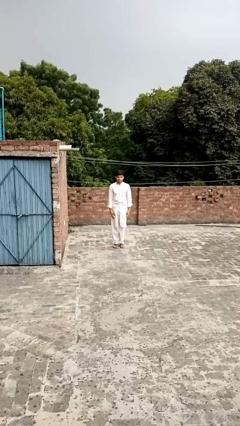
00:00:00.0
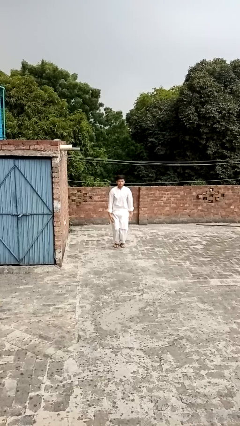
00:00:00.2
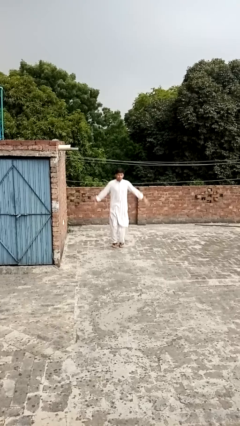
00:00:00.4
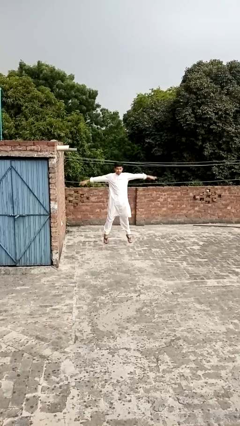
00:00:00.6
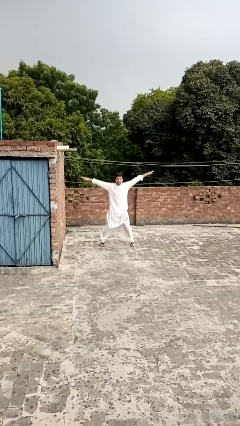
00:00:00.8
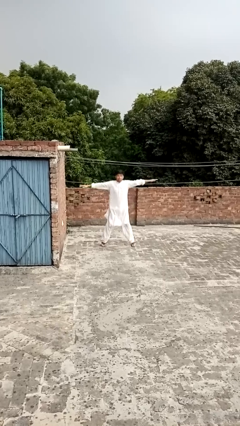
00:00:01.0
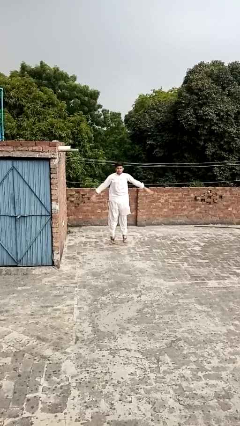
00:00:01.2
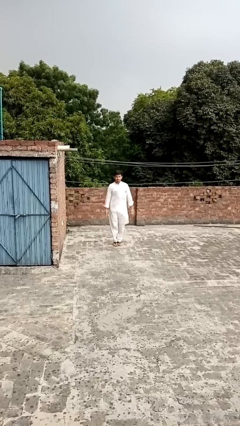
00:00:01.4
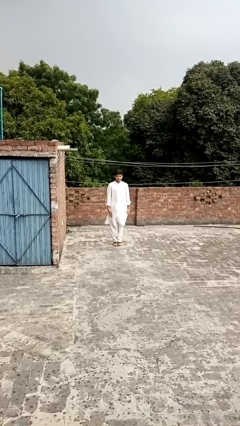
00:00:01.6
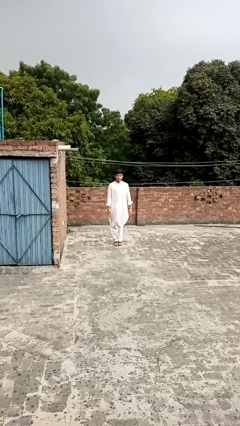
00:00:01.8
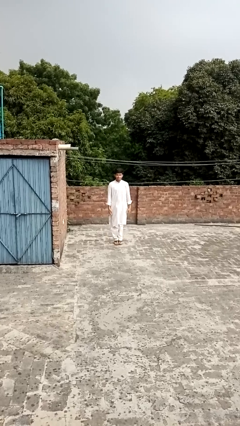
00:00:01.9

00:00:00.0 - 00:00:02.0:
person exercises with jumping jacks

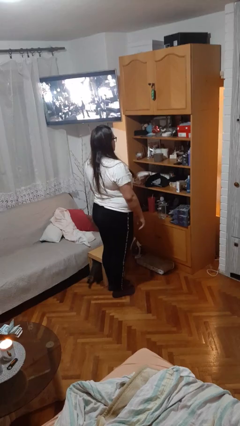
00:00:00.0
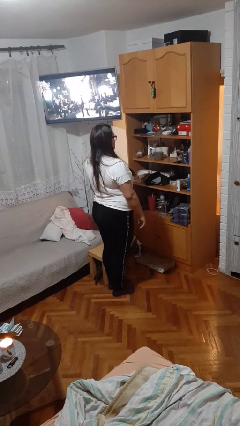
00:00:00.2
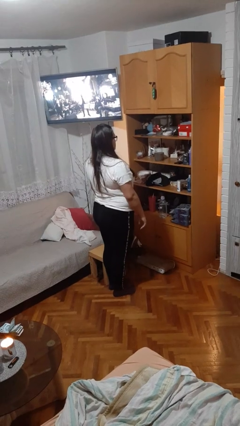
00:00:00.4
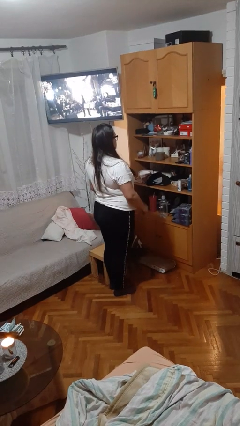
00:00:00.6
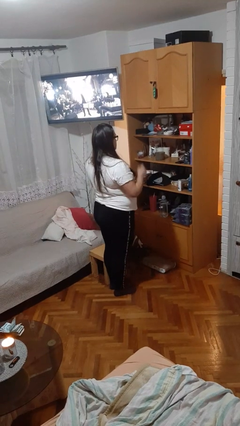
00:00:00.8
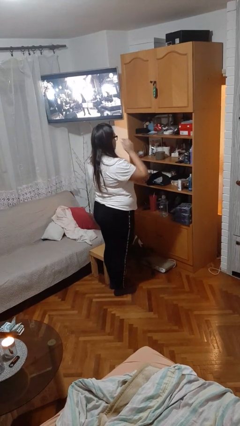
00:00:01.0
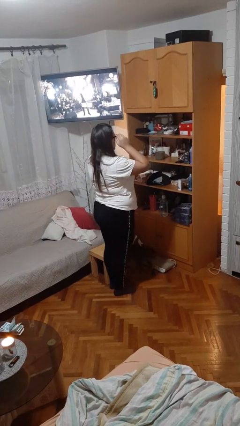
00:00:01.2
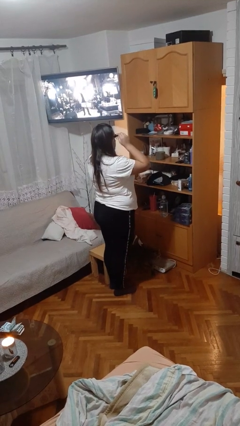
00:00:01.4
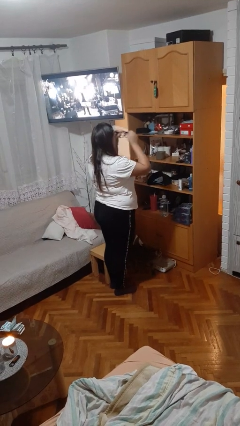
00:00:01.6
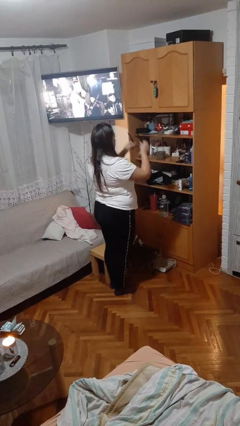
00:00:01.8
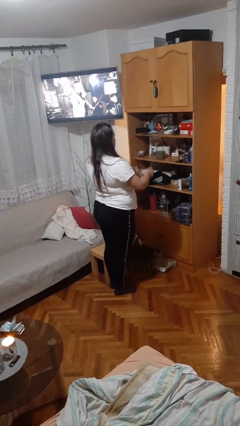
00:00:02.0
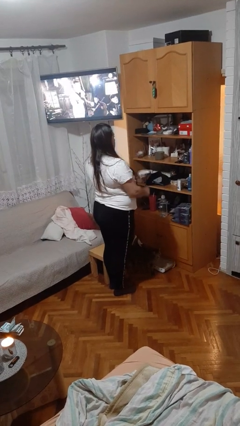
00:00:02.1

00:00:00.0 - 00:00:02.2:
person takes off glasses

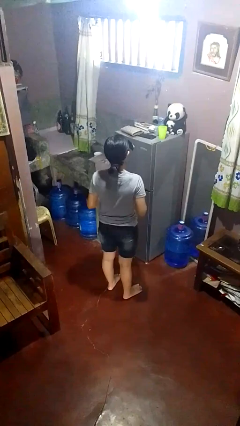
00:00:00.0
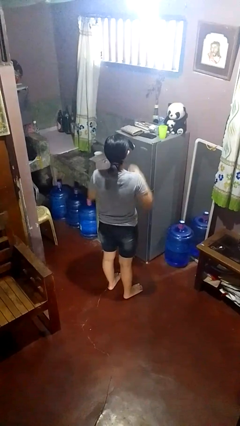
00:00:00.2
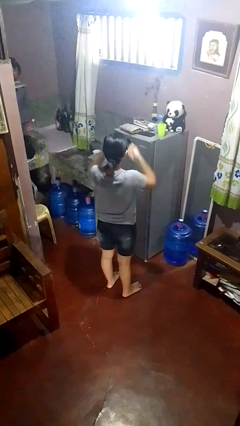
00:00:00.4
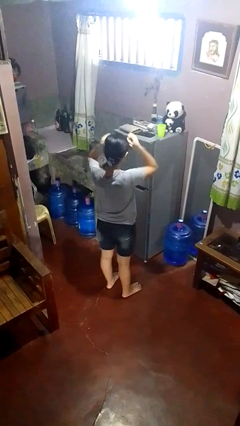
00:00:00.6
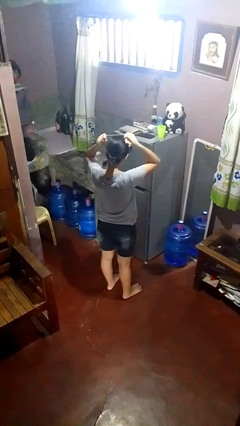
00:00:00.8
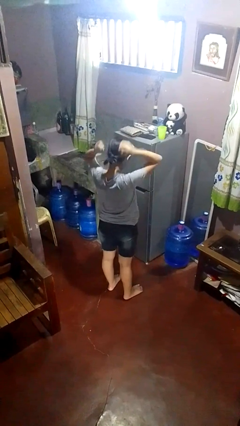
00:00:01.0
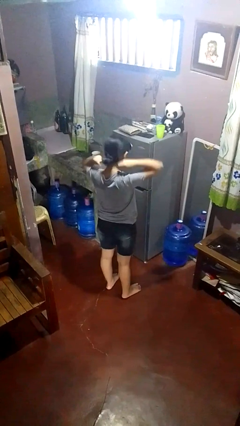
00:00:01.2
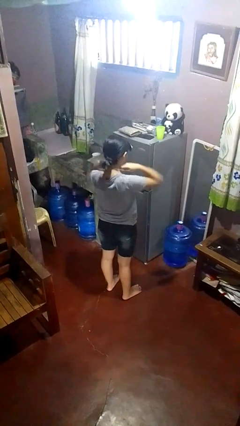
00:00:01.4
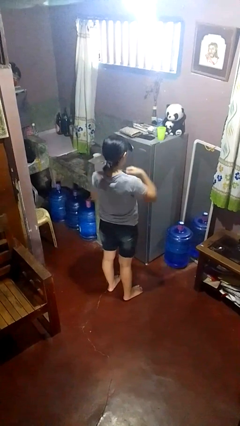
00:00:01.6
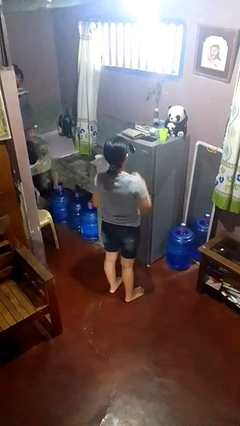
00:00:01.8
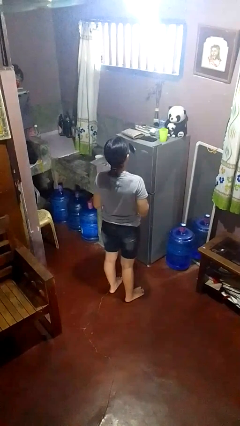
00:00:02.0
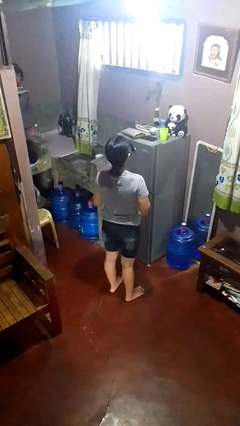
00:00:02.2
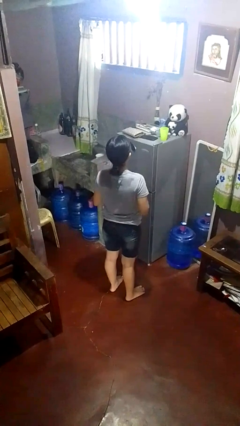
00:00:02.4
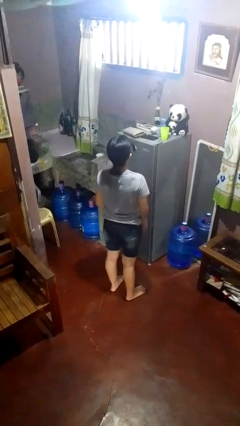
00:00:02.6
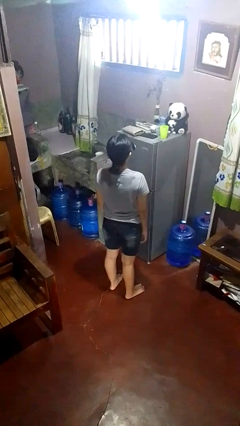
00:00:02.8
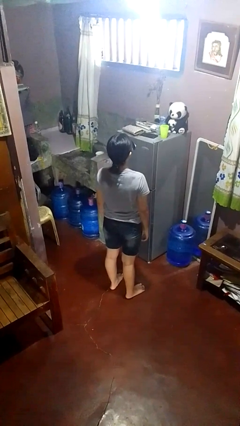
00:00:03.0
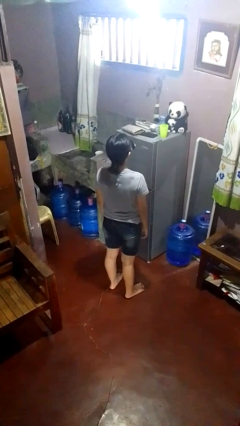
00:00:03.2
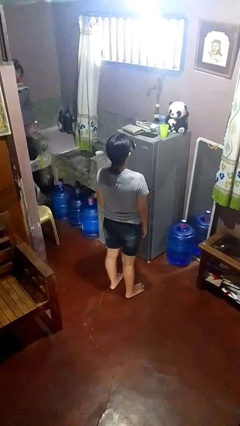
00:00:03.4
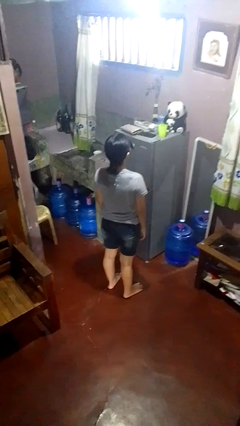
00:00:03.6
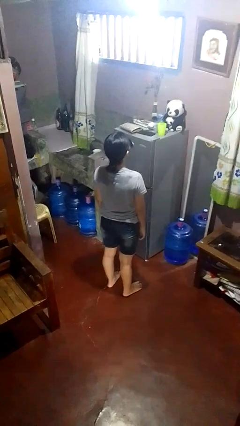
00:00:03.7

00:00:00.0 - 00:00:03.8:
person puts on necklace

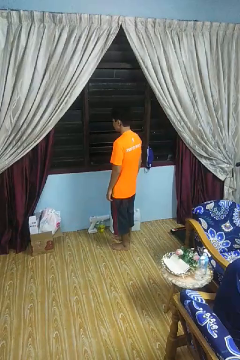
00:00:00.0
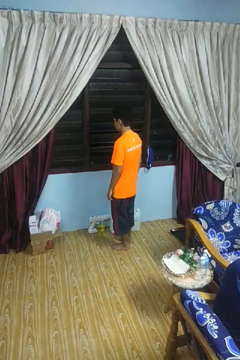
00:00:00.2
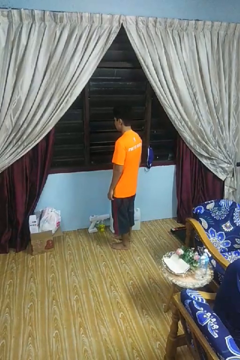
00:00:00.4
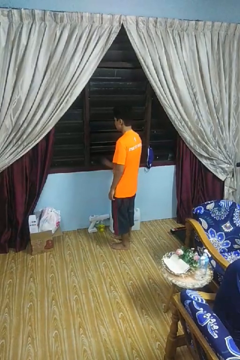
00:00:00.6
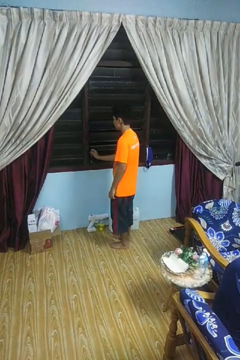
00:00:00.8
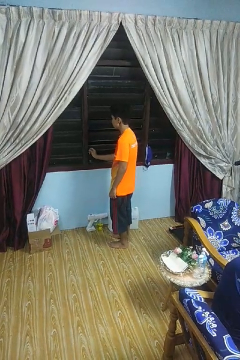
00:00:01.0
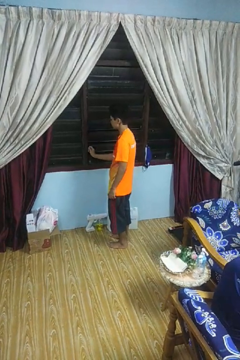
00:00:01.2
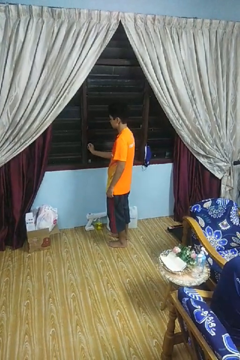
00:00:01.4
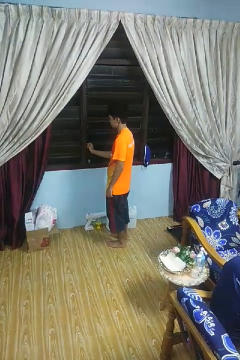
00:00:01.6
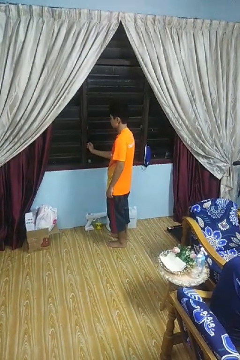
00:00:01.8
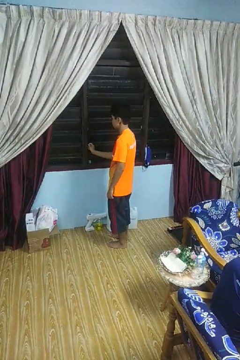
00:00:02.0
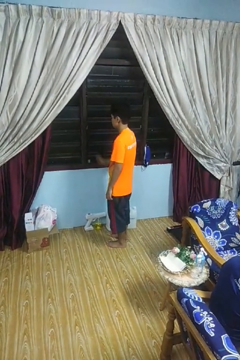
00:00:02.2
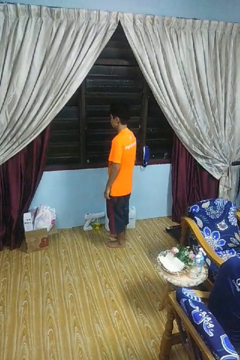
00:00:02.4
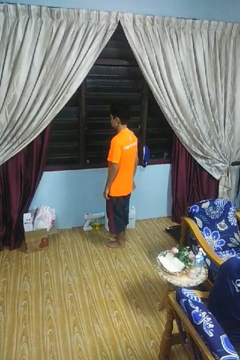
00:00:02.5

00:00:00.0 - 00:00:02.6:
person closes home window

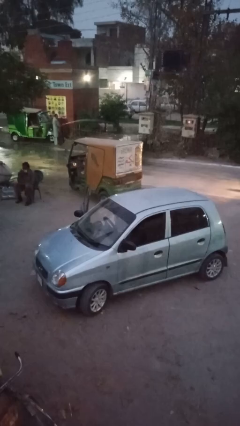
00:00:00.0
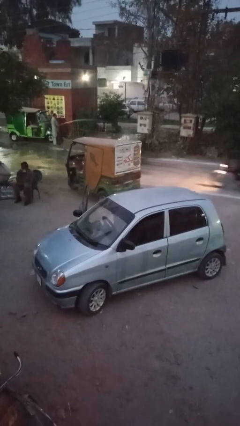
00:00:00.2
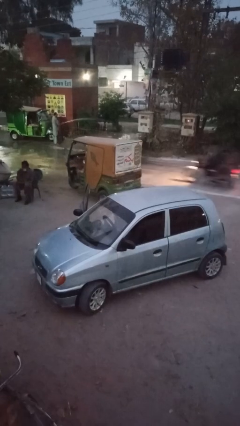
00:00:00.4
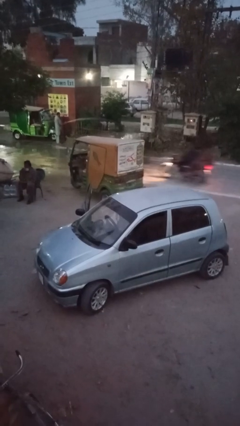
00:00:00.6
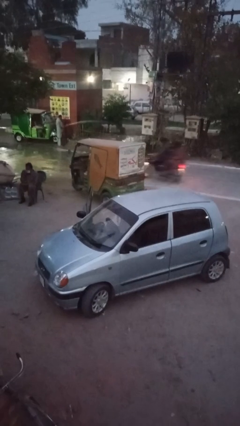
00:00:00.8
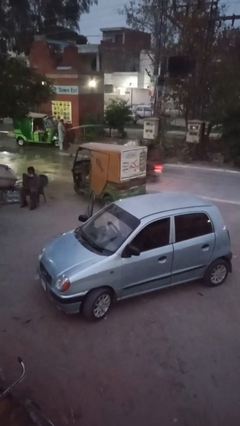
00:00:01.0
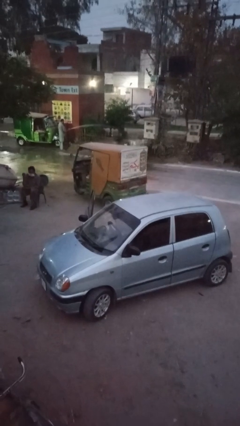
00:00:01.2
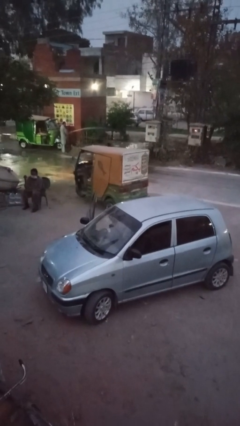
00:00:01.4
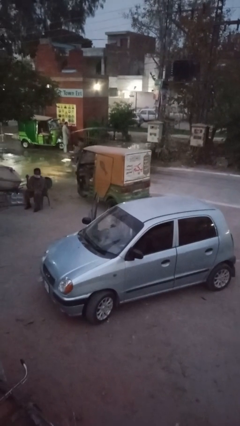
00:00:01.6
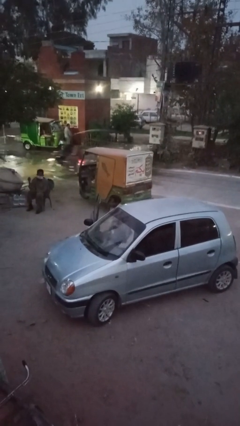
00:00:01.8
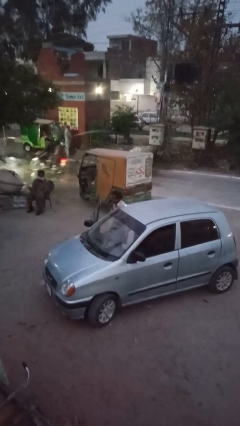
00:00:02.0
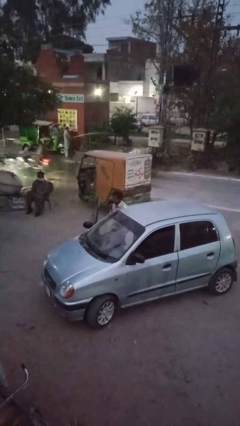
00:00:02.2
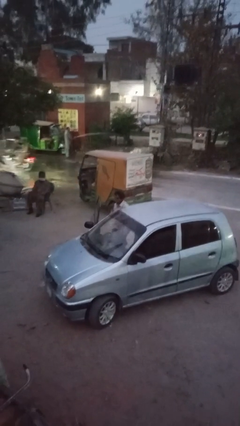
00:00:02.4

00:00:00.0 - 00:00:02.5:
person exits car

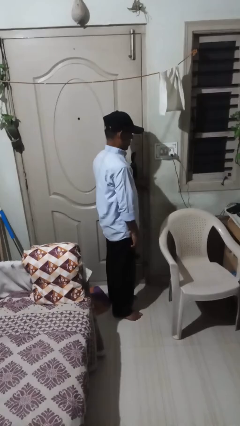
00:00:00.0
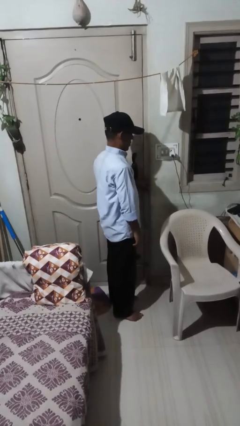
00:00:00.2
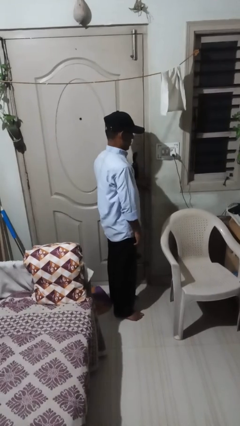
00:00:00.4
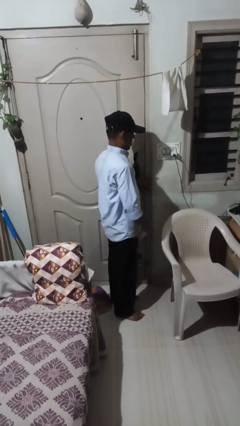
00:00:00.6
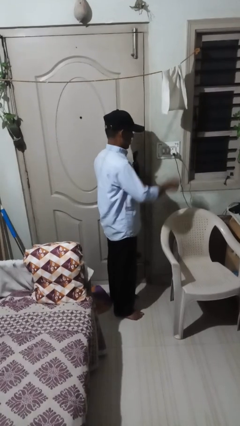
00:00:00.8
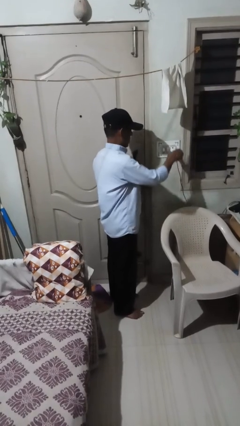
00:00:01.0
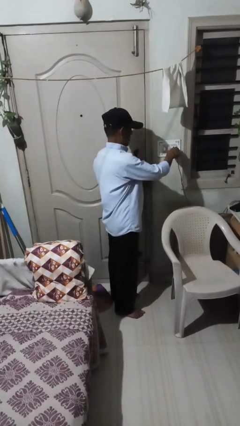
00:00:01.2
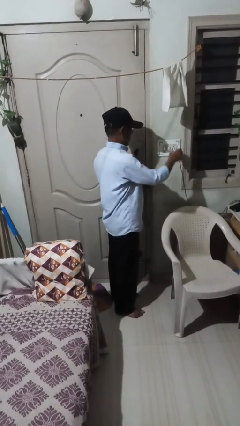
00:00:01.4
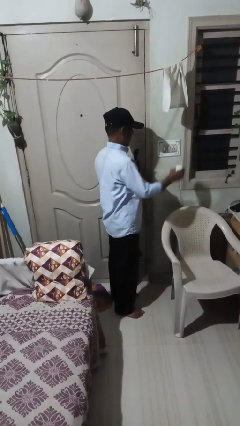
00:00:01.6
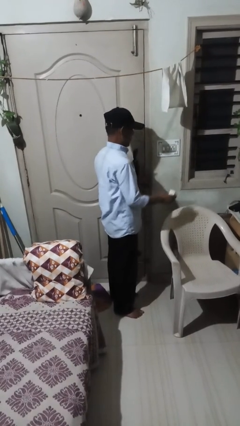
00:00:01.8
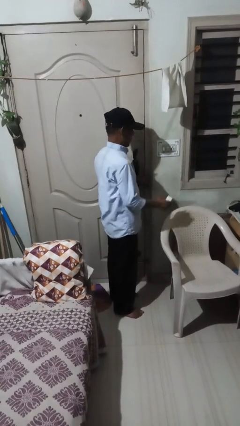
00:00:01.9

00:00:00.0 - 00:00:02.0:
person unplugs from electrical socket

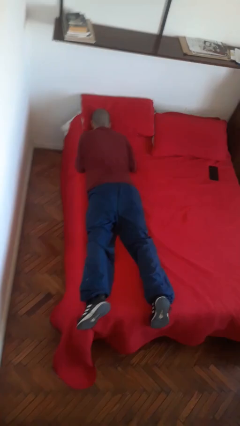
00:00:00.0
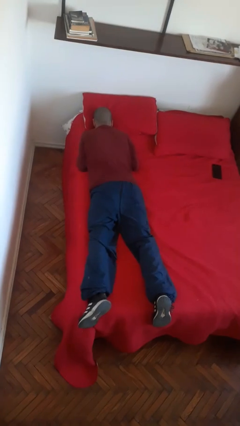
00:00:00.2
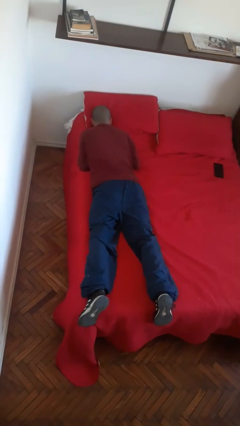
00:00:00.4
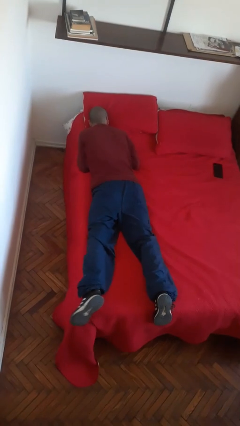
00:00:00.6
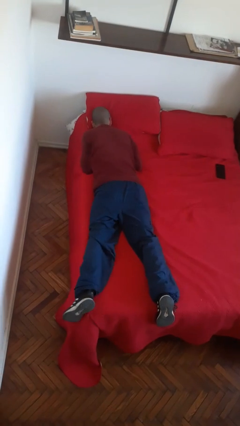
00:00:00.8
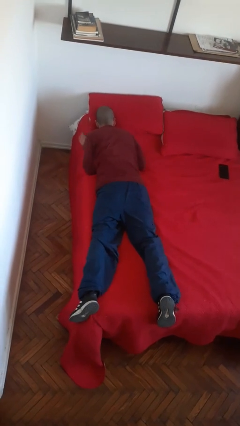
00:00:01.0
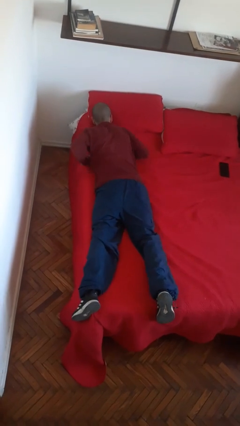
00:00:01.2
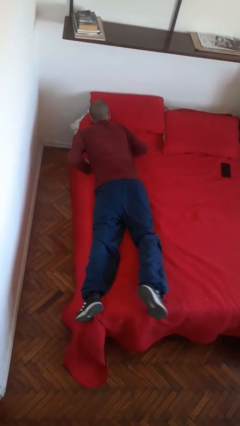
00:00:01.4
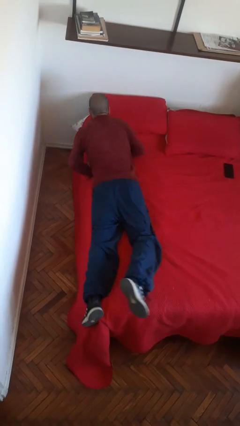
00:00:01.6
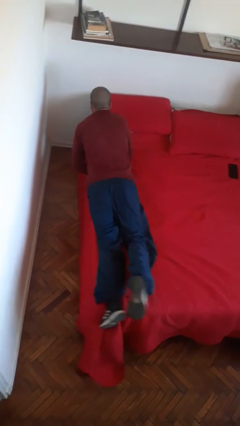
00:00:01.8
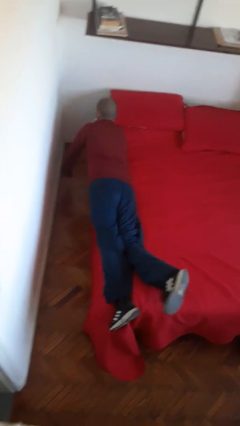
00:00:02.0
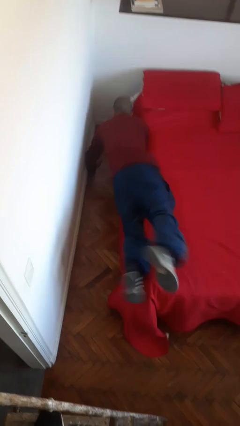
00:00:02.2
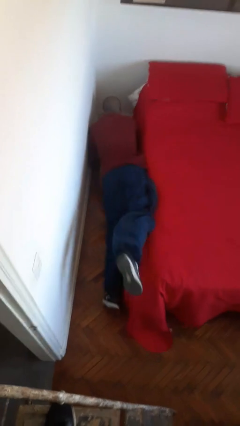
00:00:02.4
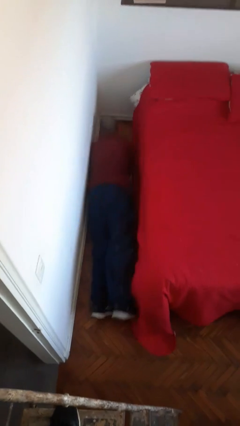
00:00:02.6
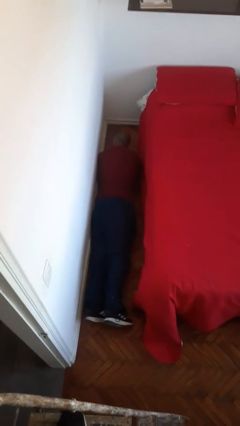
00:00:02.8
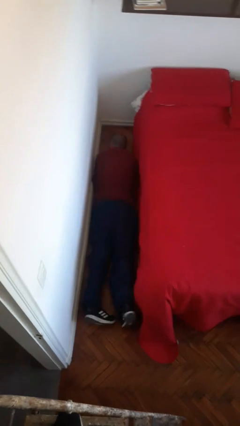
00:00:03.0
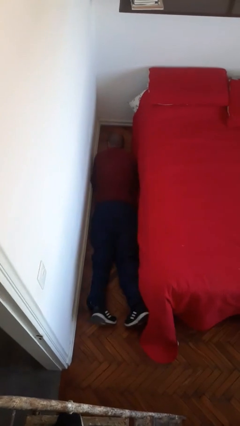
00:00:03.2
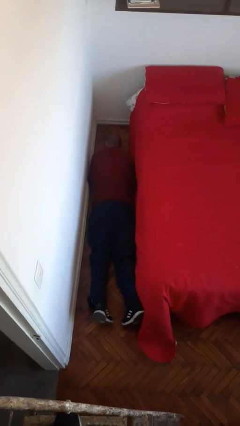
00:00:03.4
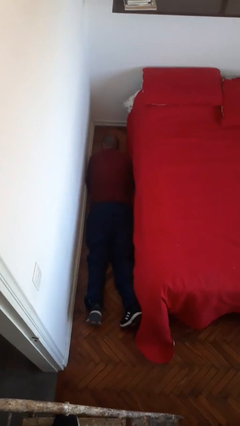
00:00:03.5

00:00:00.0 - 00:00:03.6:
person falls from bed
